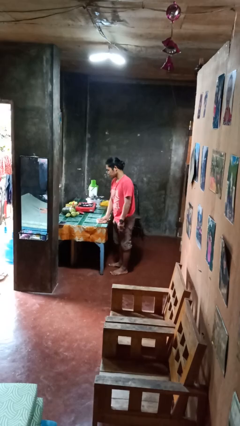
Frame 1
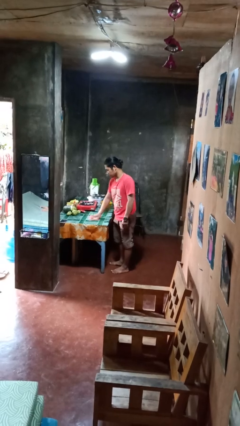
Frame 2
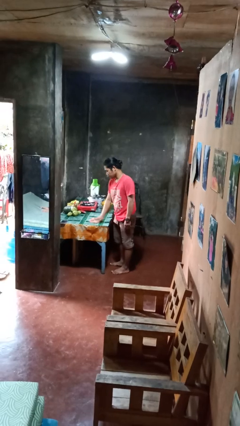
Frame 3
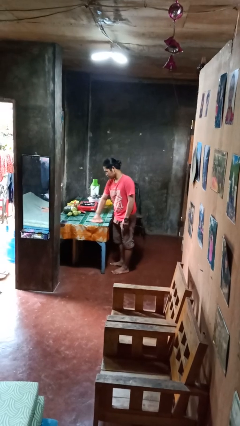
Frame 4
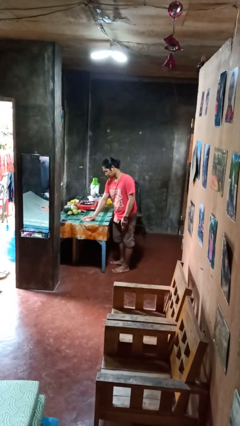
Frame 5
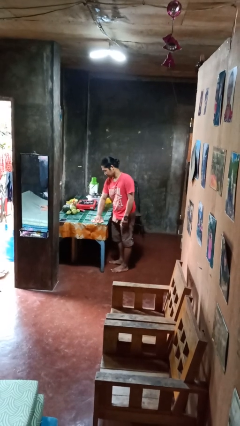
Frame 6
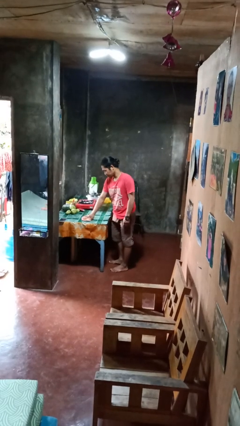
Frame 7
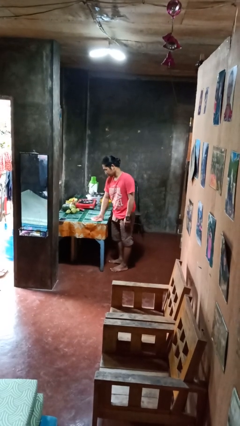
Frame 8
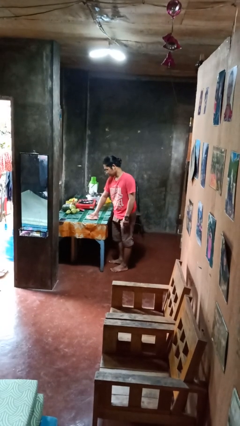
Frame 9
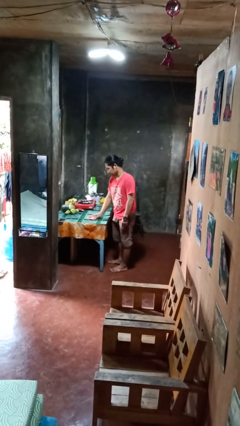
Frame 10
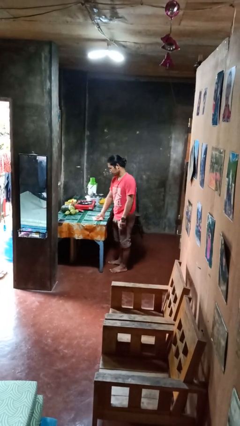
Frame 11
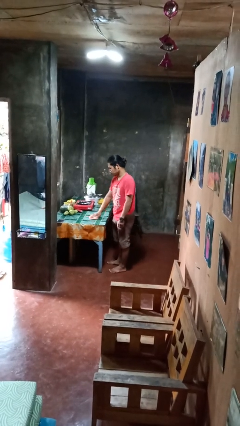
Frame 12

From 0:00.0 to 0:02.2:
person cleans table with rag

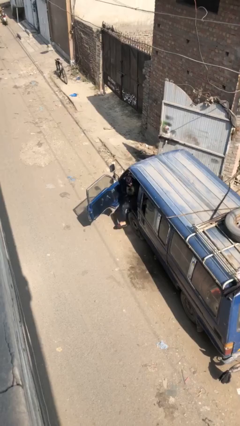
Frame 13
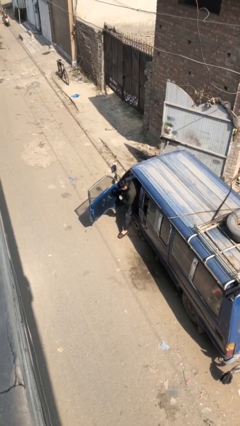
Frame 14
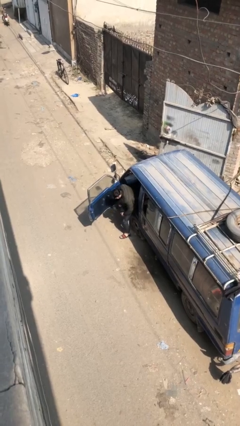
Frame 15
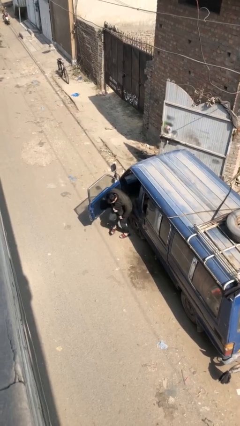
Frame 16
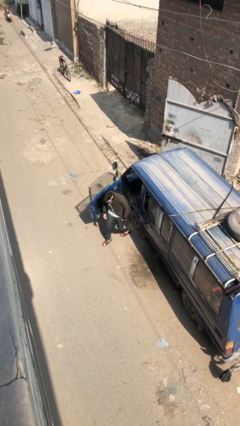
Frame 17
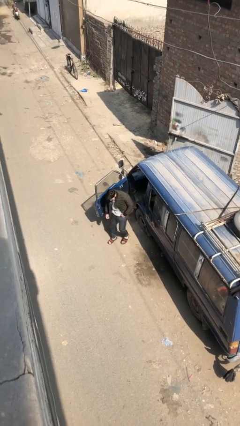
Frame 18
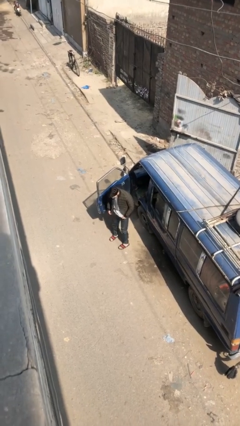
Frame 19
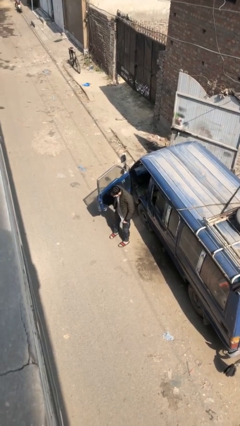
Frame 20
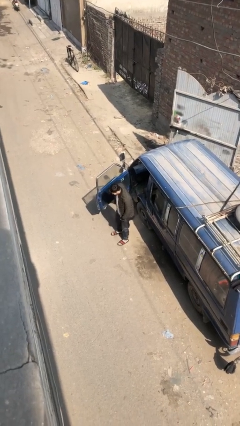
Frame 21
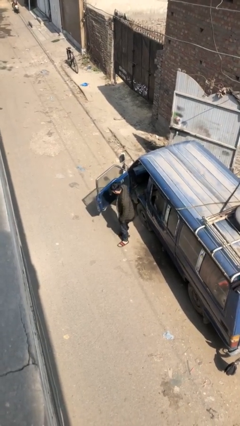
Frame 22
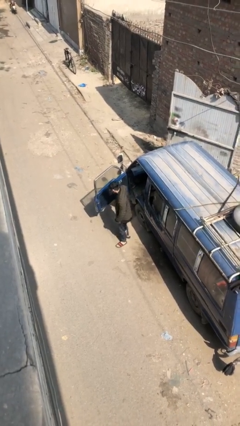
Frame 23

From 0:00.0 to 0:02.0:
person exits car

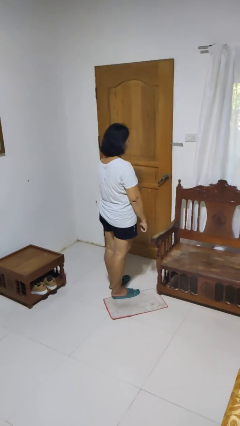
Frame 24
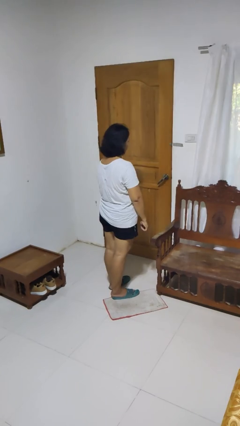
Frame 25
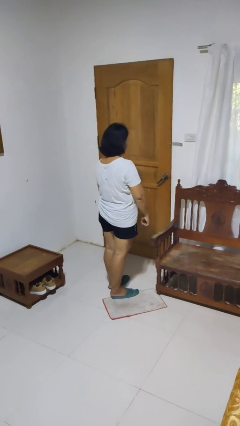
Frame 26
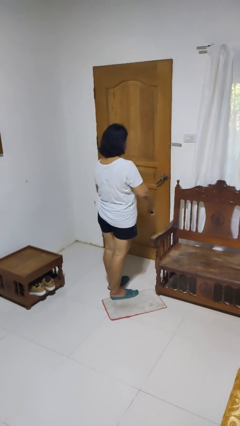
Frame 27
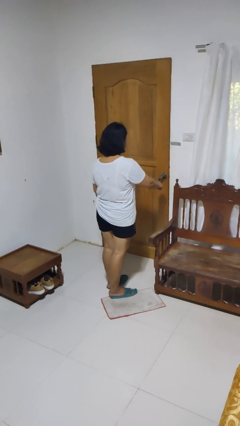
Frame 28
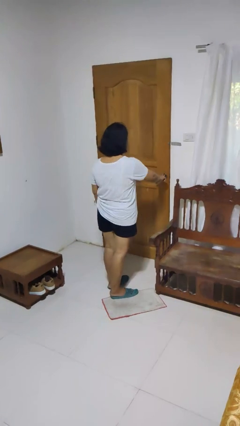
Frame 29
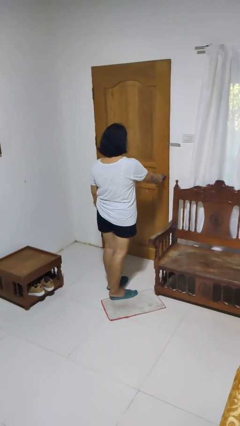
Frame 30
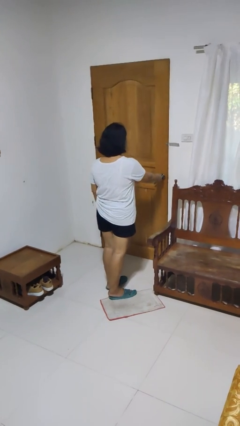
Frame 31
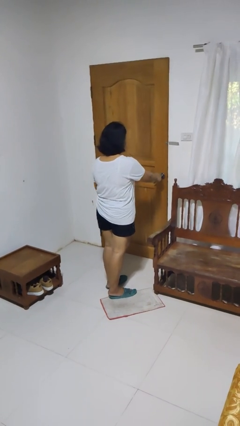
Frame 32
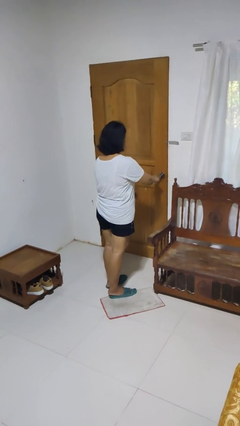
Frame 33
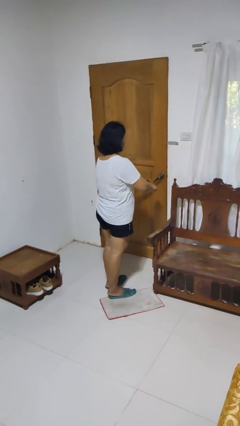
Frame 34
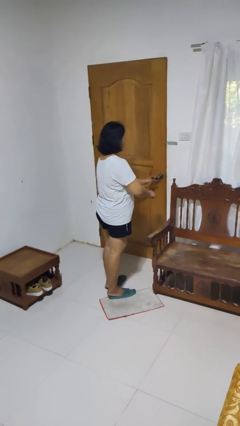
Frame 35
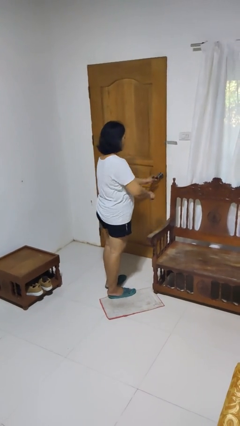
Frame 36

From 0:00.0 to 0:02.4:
person unlocks door with keys

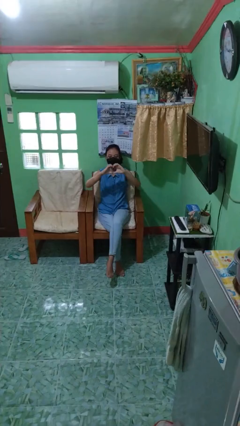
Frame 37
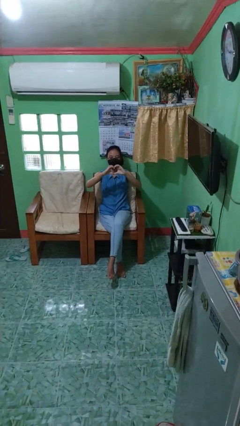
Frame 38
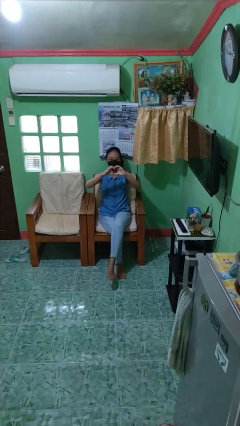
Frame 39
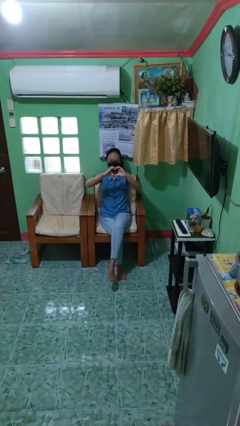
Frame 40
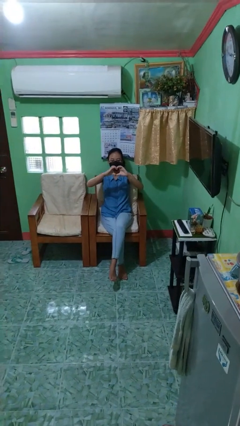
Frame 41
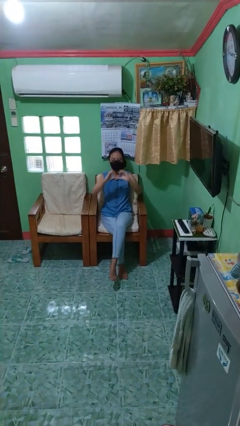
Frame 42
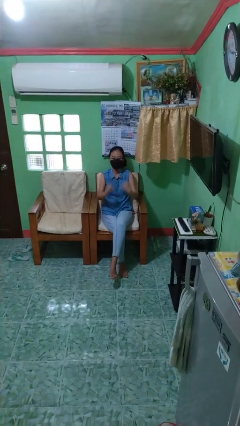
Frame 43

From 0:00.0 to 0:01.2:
person gestures heart

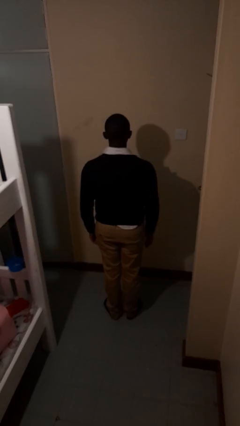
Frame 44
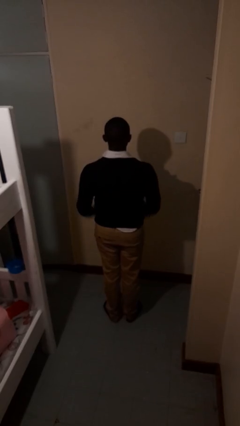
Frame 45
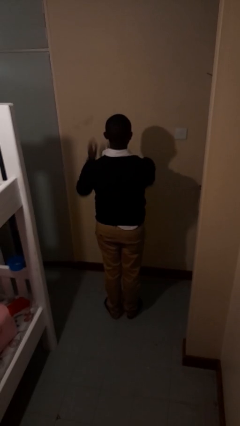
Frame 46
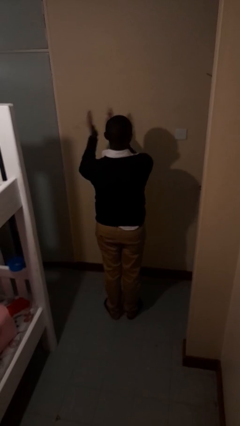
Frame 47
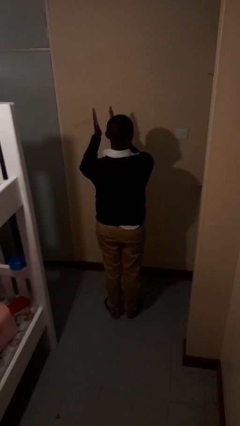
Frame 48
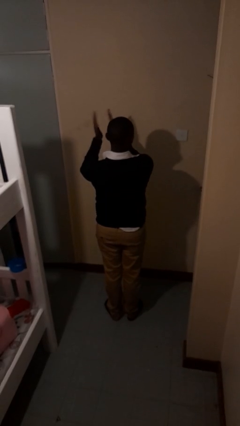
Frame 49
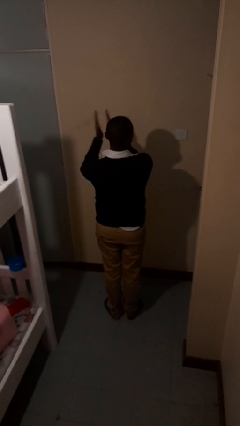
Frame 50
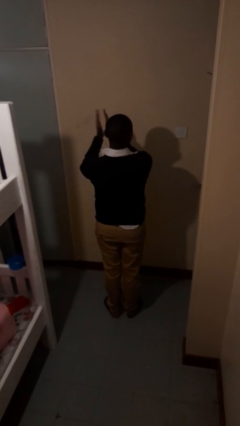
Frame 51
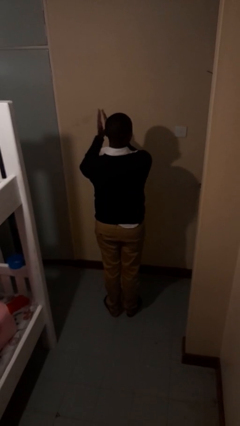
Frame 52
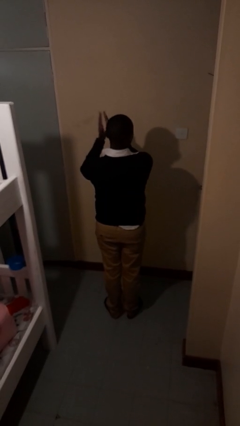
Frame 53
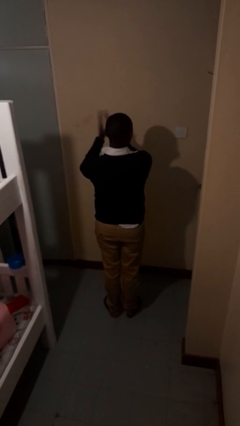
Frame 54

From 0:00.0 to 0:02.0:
person claps hands

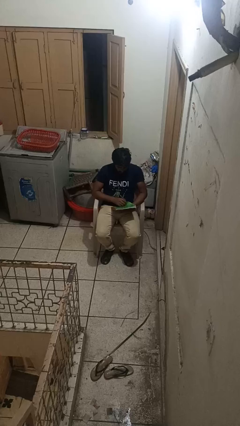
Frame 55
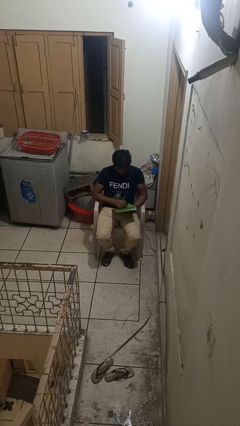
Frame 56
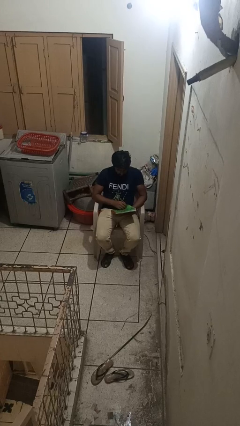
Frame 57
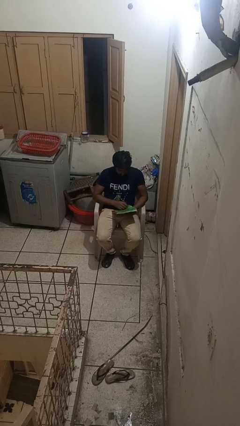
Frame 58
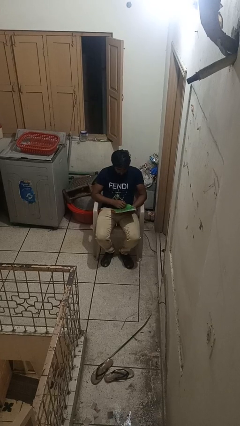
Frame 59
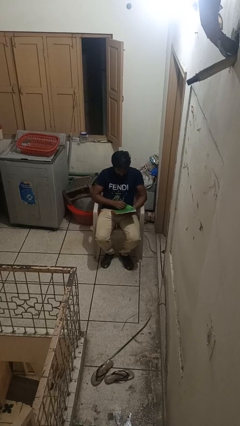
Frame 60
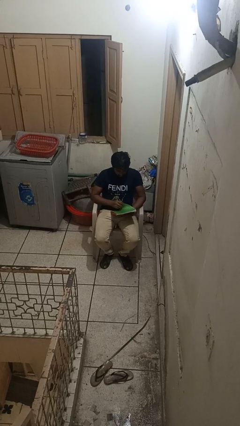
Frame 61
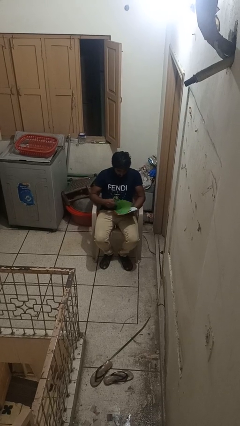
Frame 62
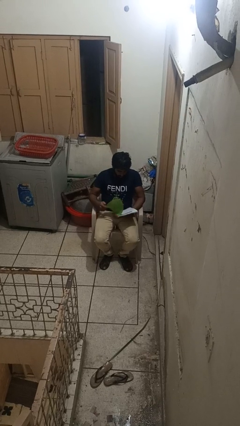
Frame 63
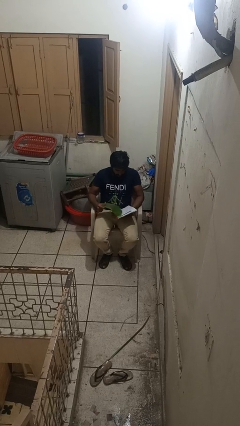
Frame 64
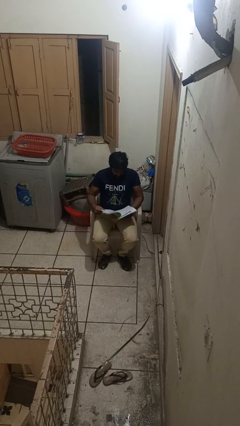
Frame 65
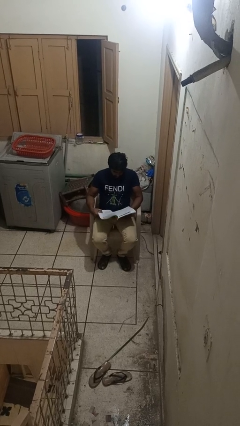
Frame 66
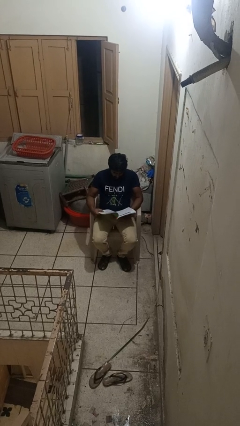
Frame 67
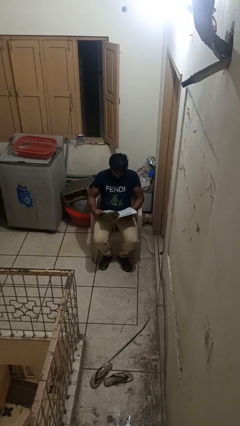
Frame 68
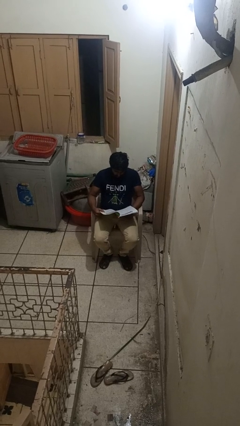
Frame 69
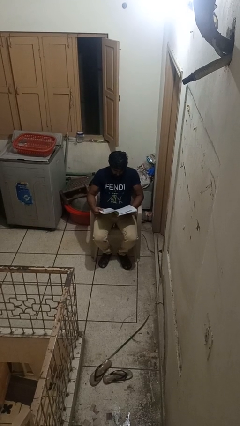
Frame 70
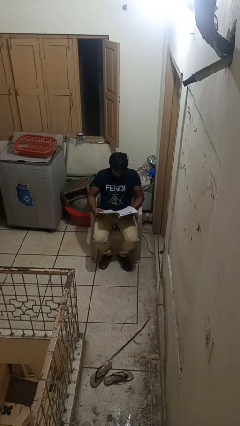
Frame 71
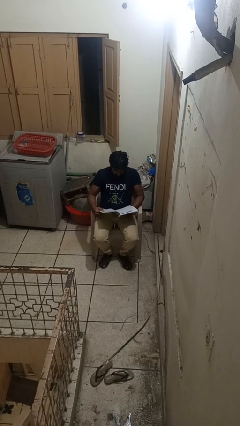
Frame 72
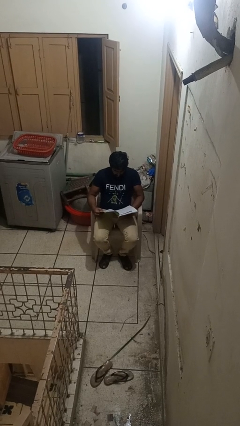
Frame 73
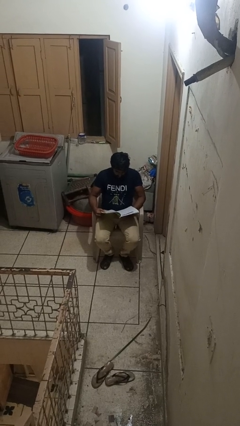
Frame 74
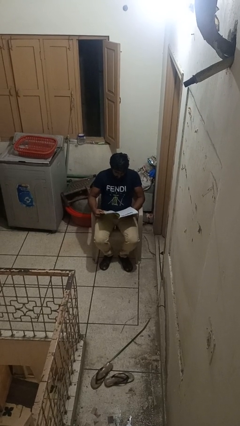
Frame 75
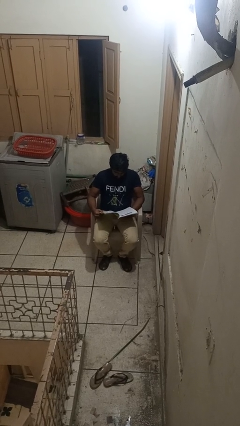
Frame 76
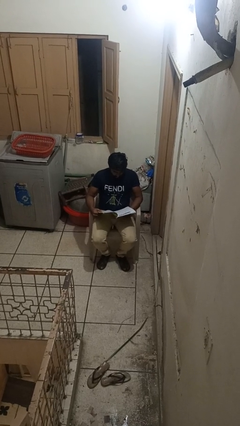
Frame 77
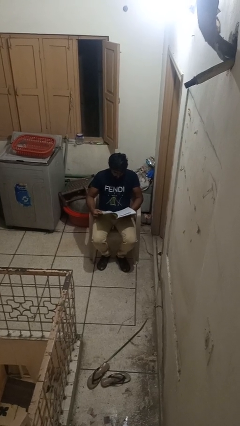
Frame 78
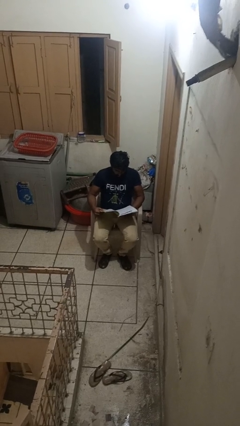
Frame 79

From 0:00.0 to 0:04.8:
person reads magazine

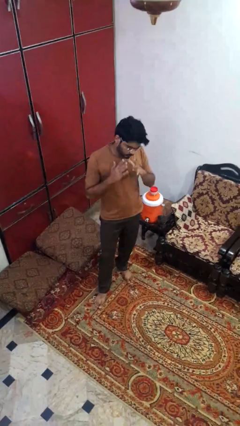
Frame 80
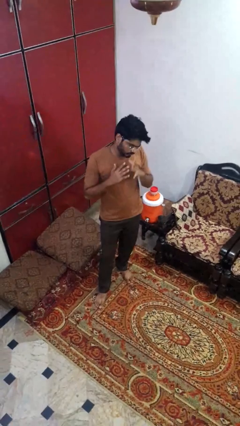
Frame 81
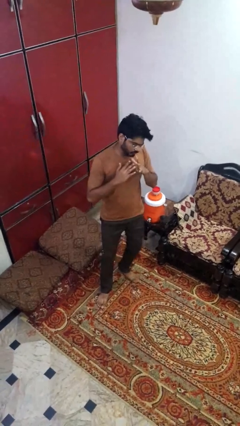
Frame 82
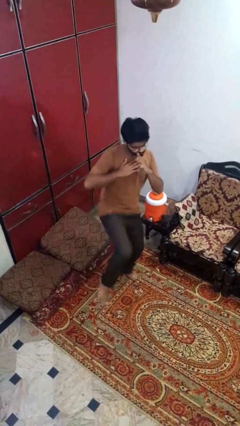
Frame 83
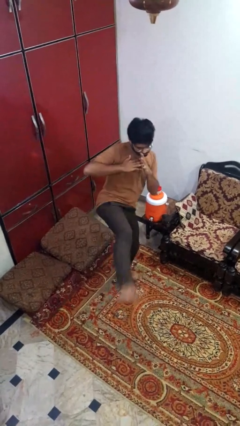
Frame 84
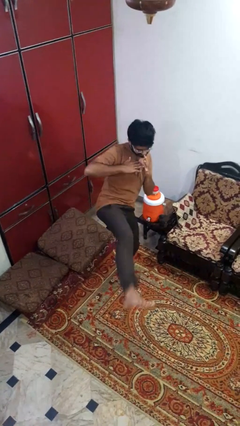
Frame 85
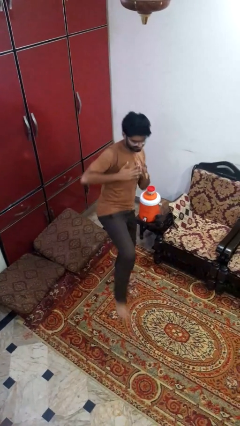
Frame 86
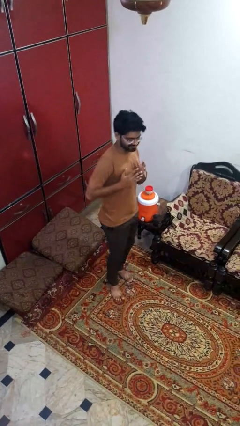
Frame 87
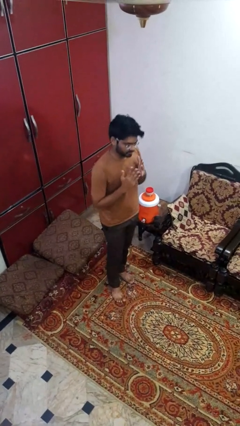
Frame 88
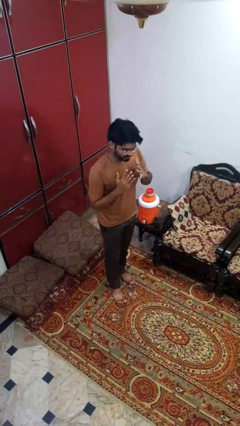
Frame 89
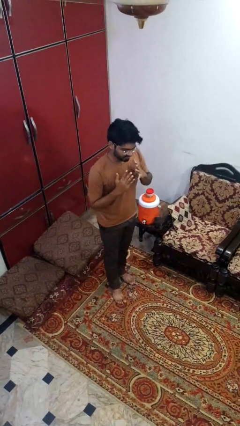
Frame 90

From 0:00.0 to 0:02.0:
person karate kicks
